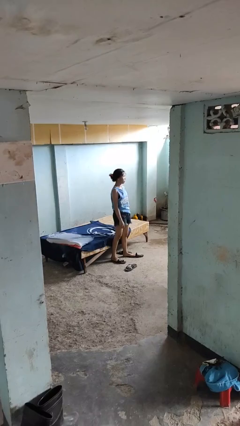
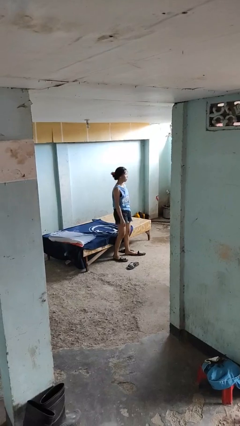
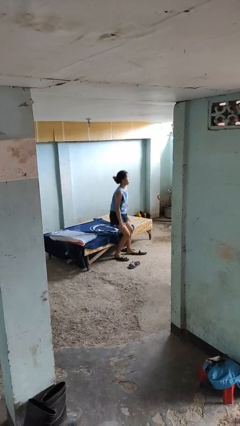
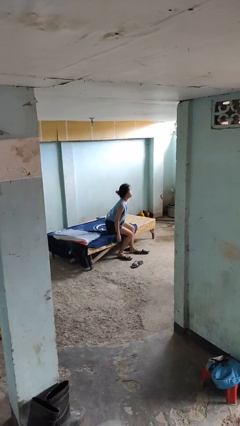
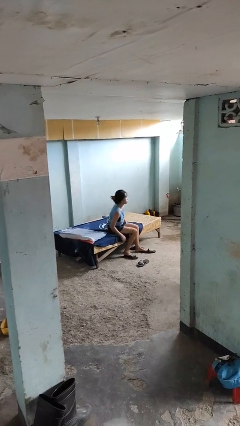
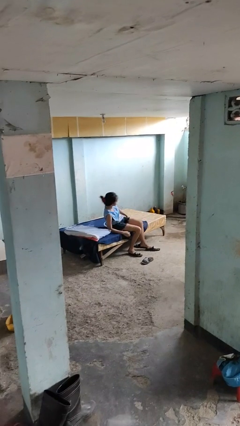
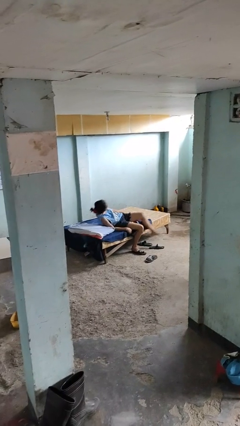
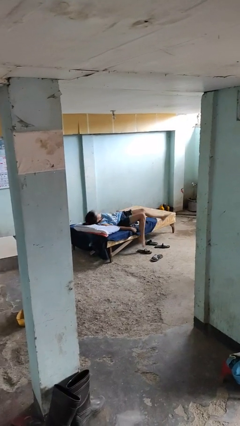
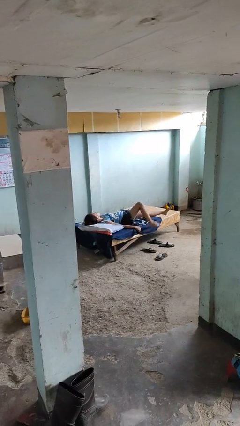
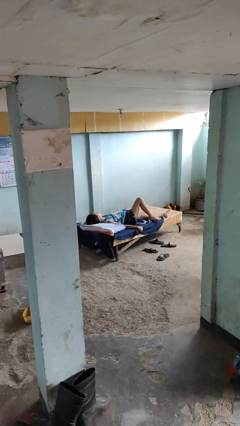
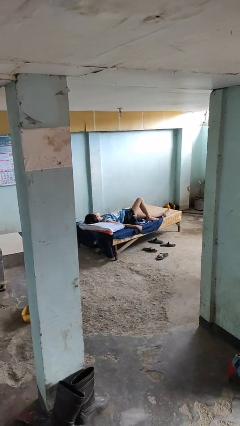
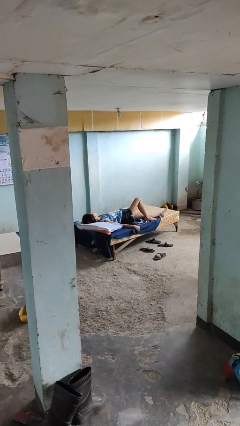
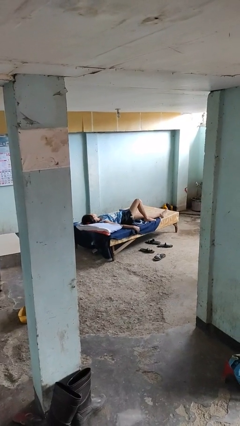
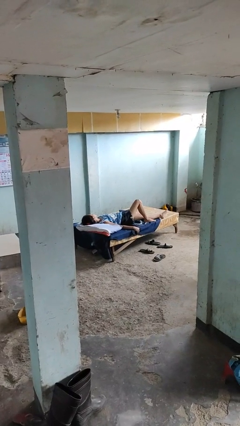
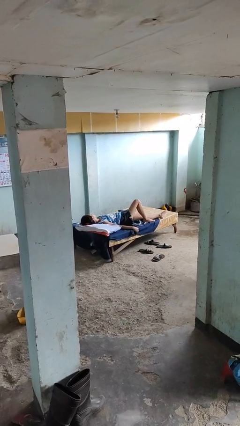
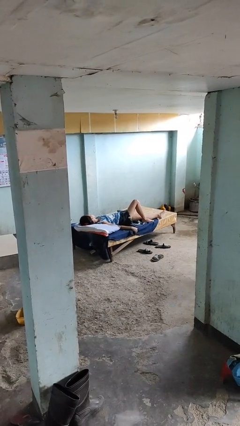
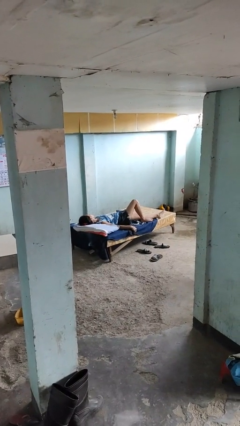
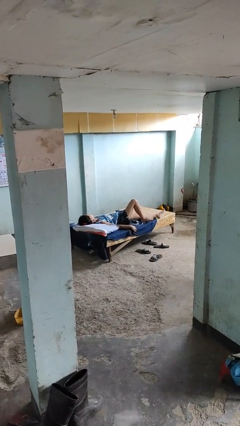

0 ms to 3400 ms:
person lies down on bed

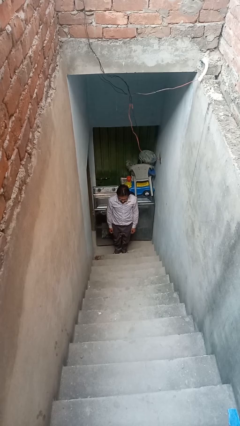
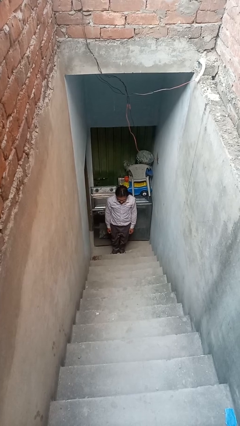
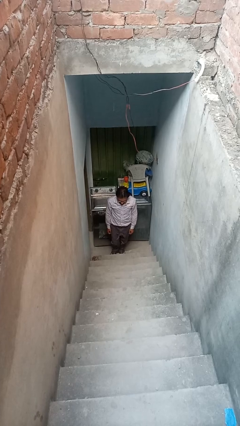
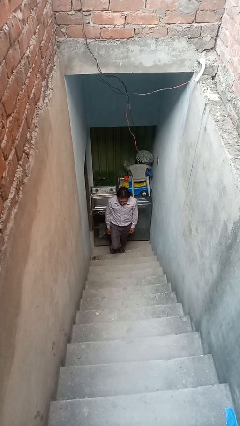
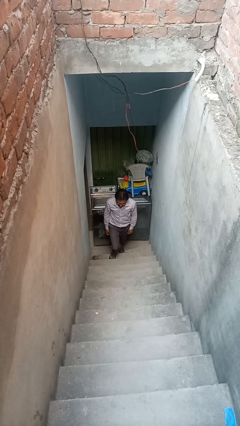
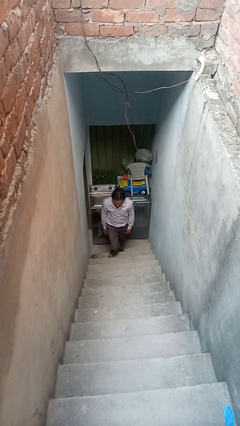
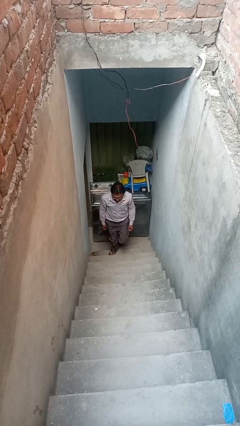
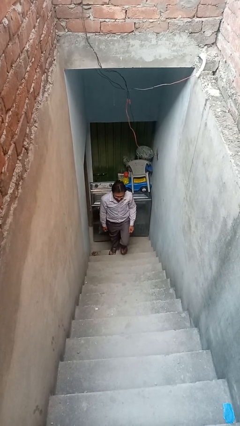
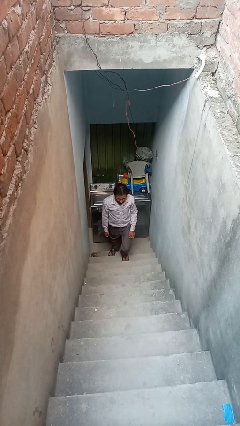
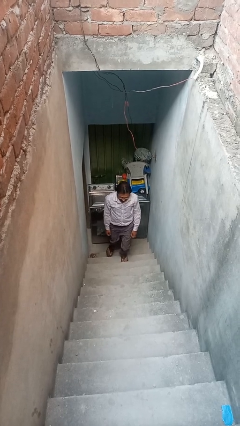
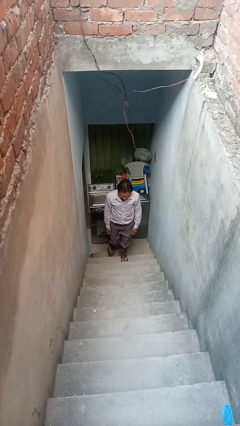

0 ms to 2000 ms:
person climbs up stairs

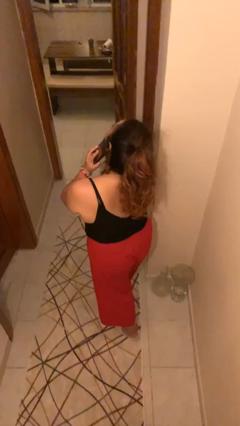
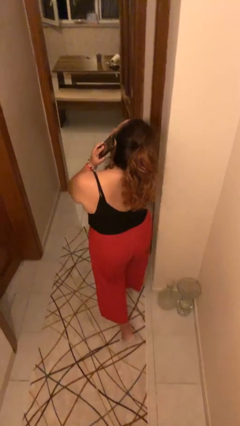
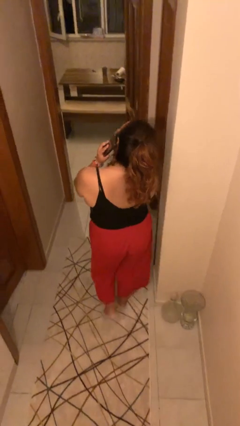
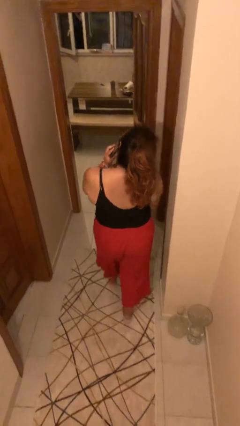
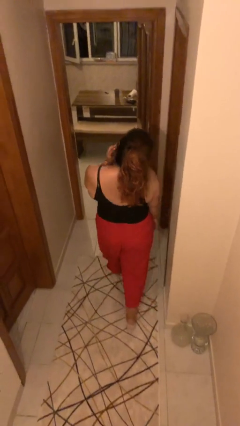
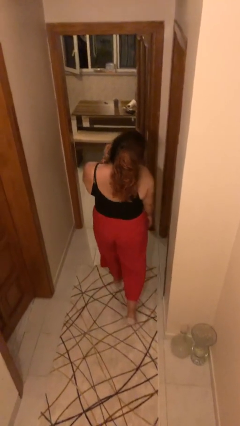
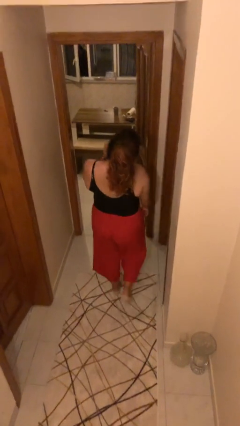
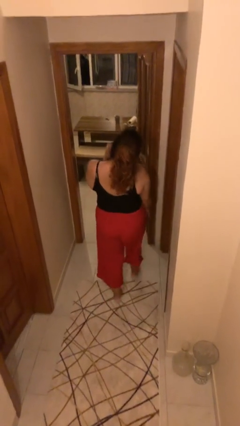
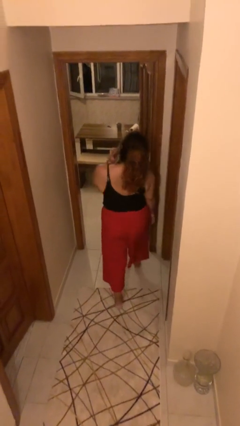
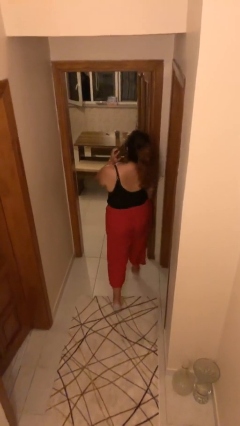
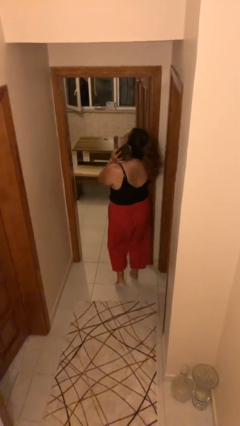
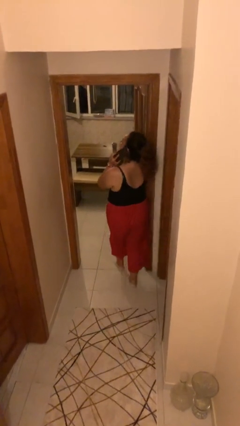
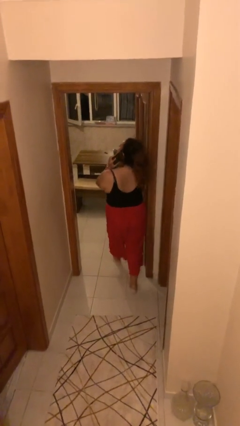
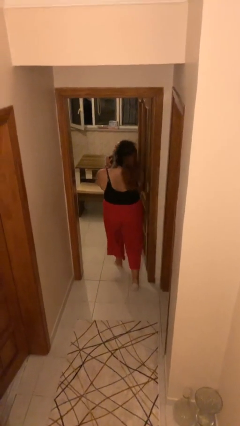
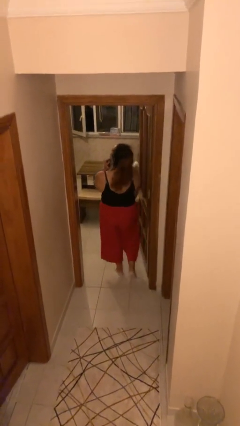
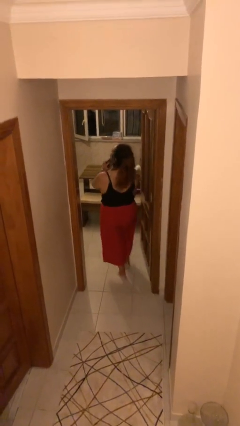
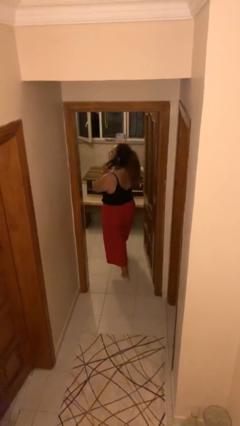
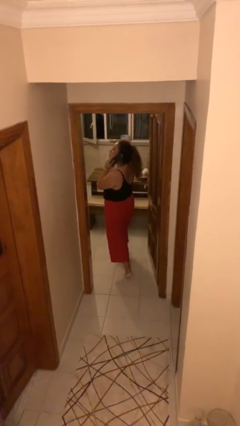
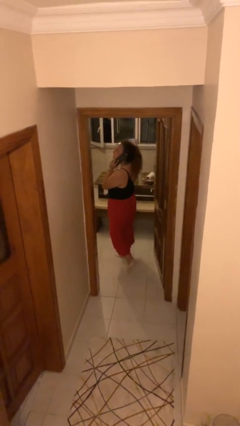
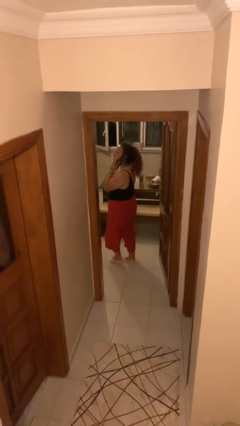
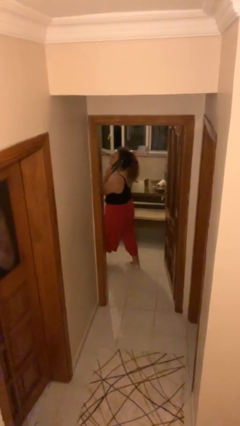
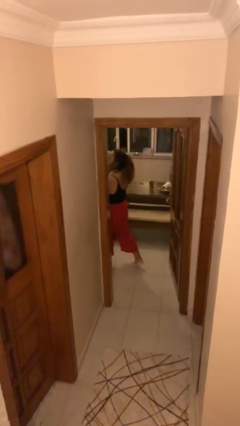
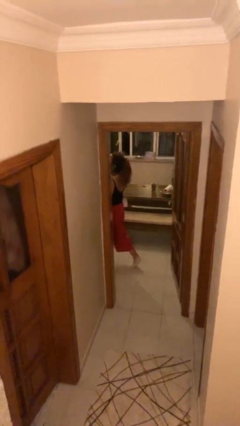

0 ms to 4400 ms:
person exits scene through structure

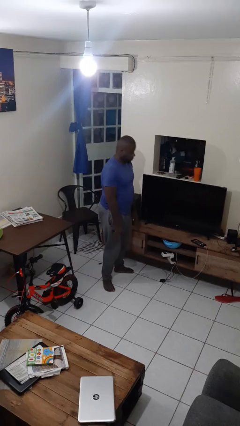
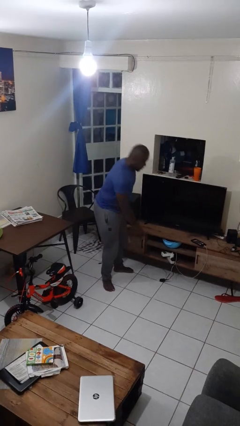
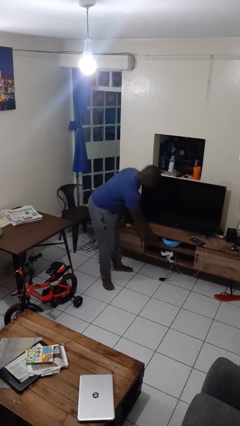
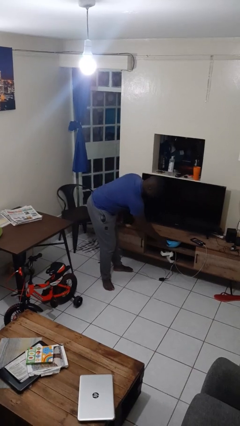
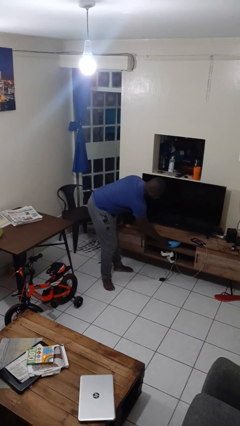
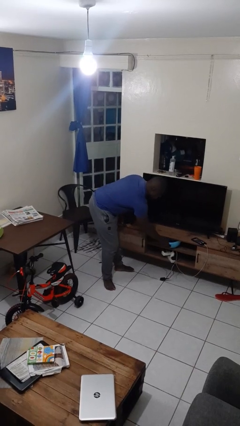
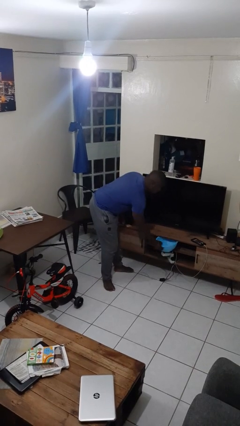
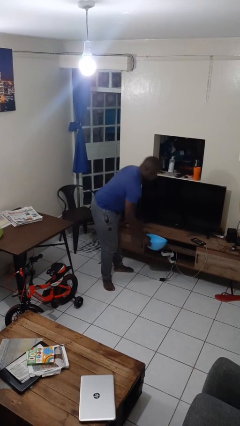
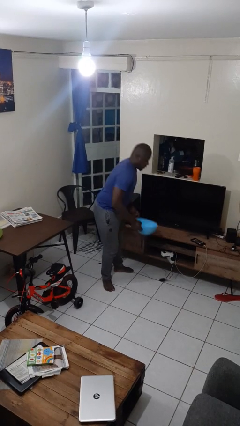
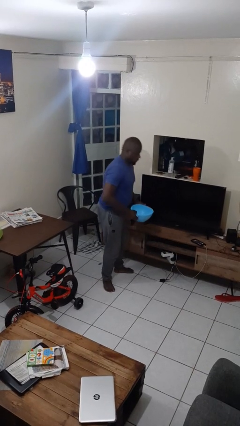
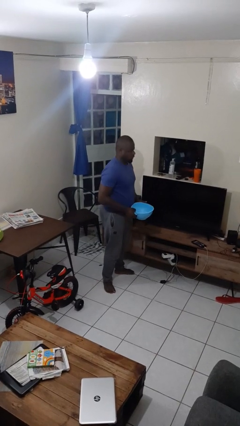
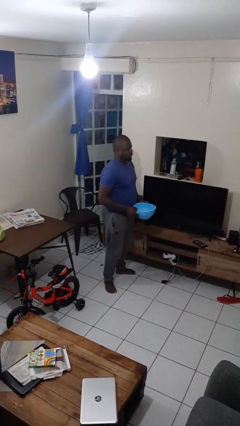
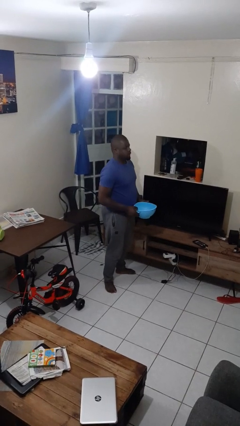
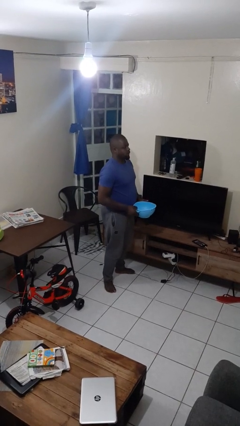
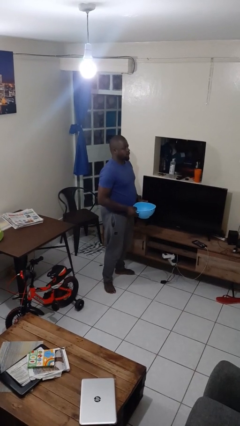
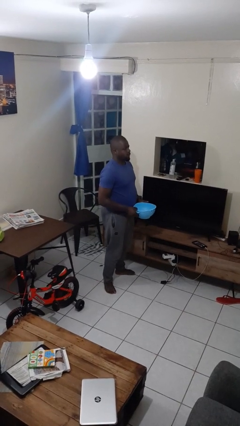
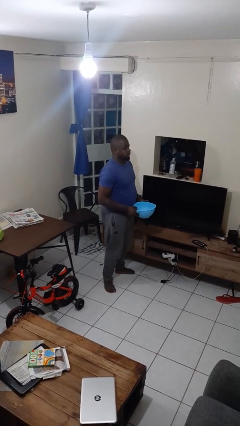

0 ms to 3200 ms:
person picks up object from cabinet

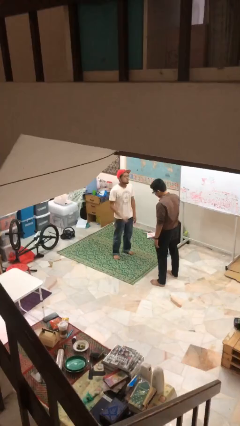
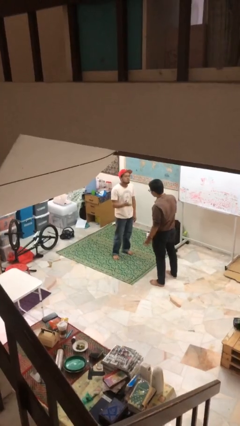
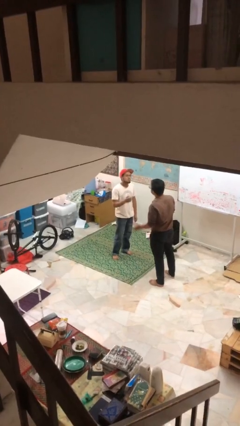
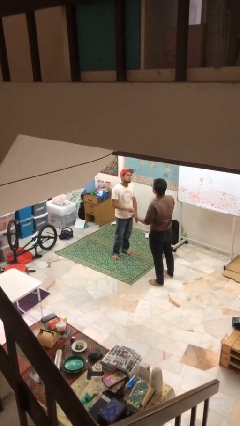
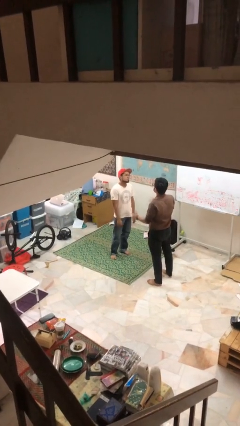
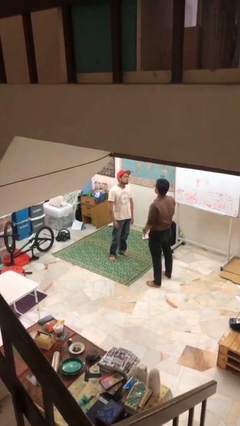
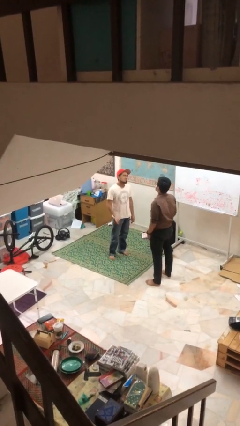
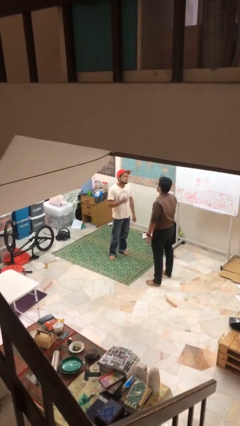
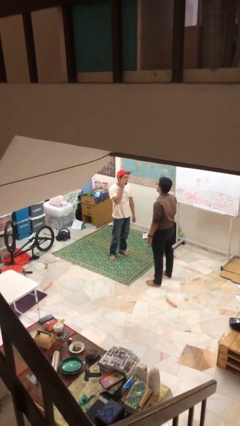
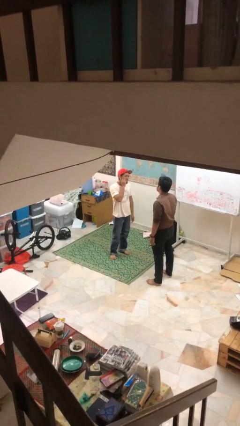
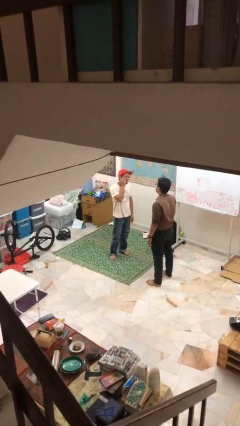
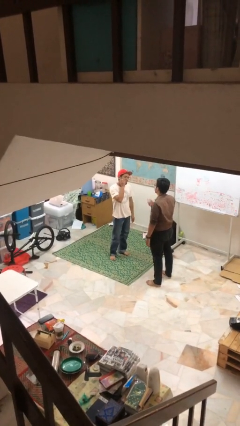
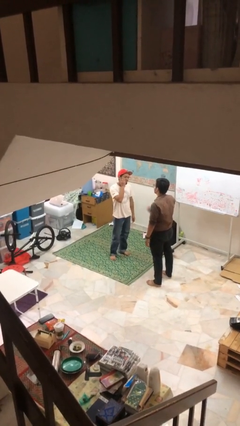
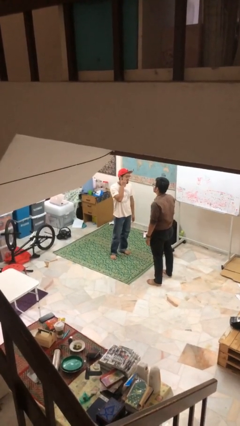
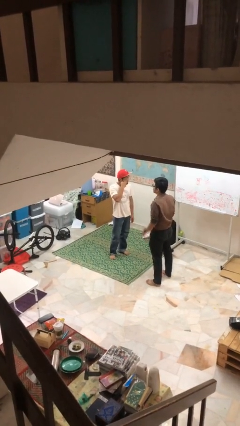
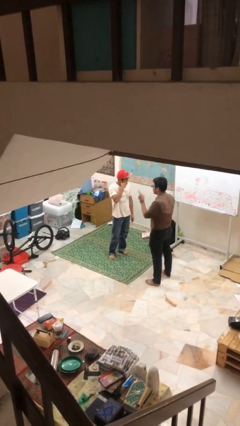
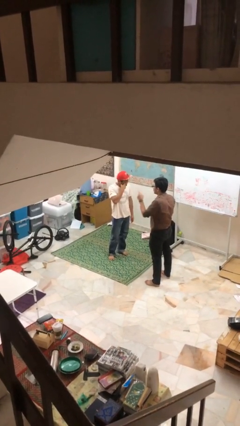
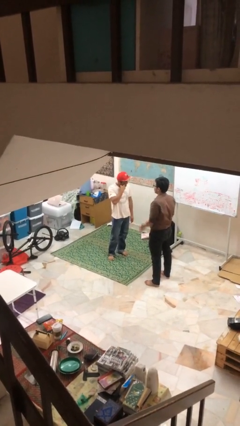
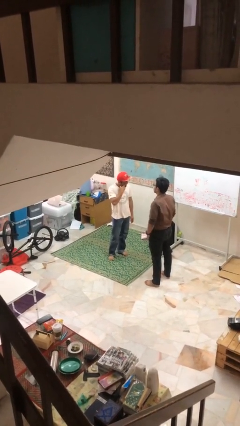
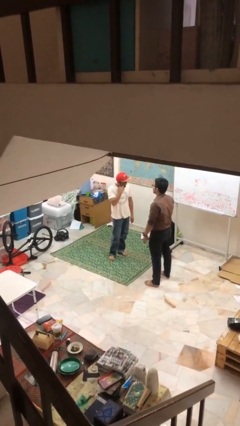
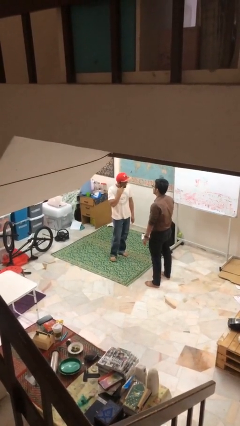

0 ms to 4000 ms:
person talks to person

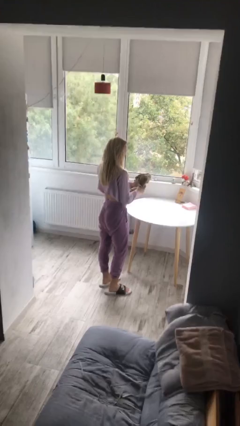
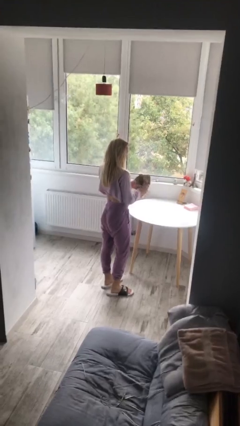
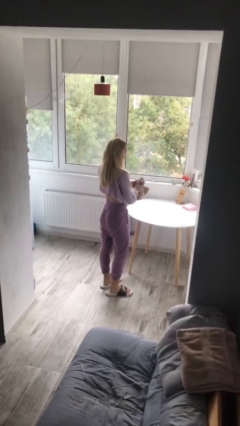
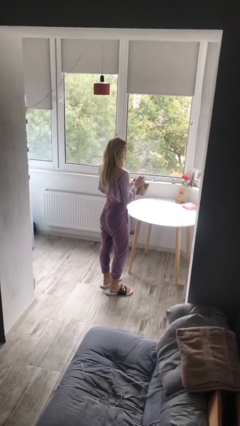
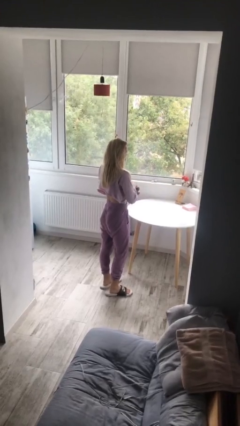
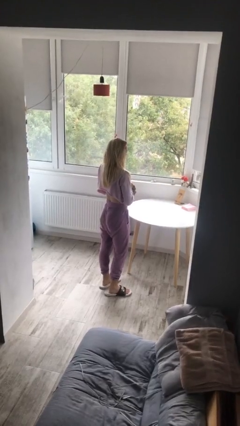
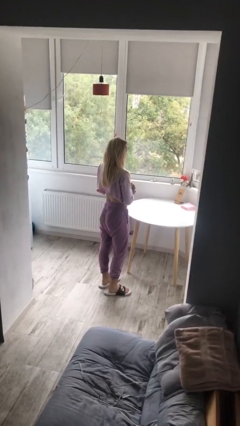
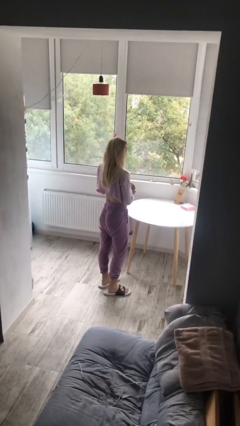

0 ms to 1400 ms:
person crumples paper
